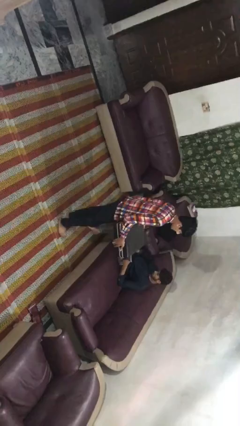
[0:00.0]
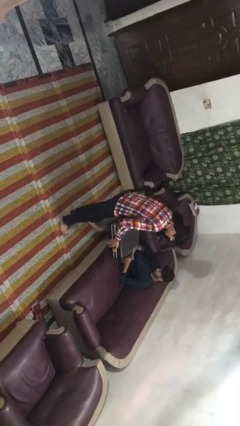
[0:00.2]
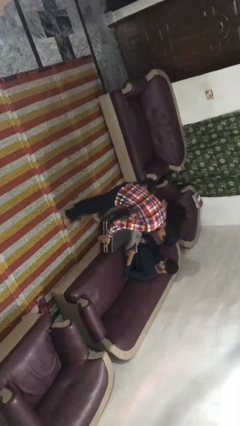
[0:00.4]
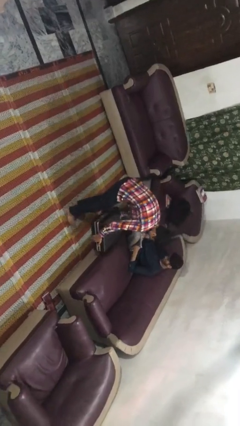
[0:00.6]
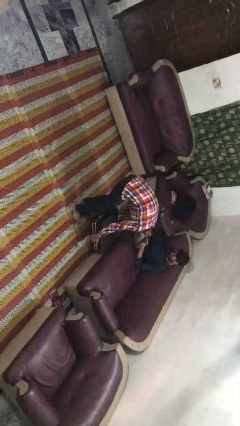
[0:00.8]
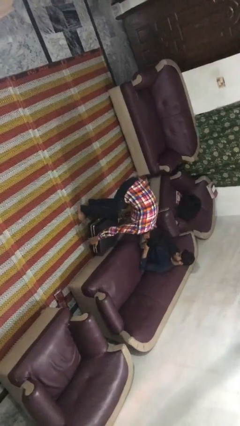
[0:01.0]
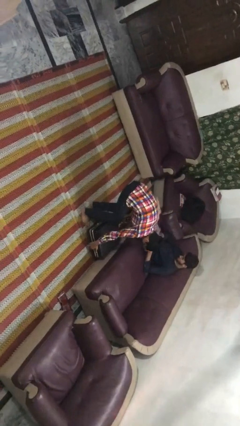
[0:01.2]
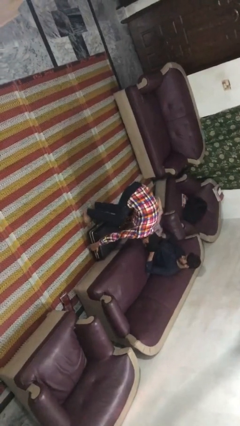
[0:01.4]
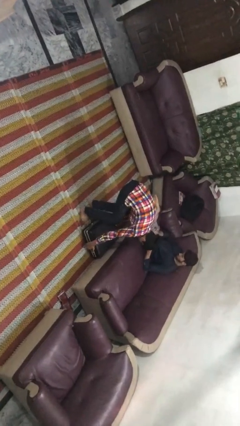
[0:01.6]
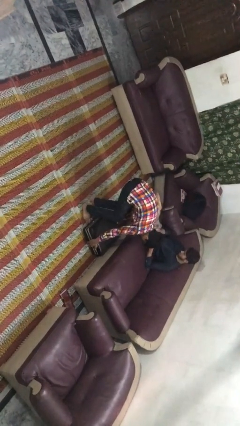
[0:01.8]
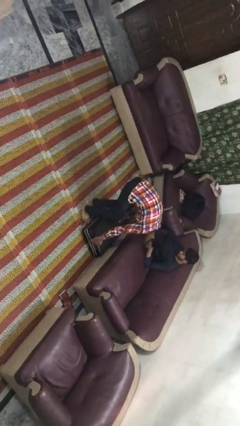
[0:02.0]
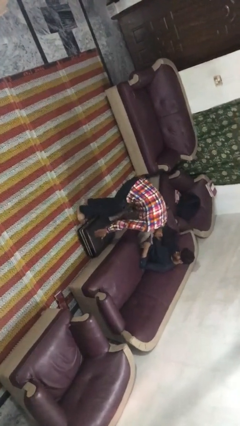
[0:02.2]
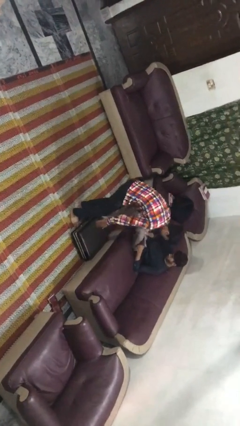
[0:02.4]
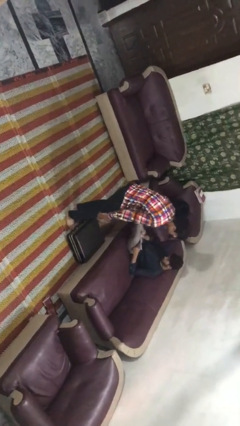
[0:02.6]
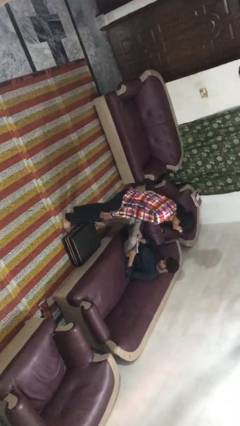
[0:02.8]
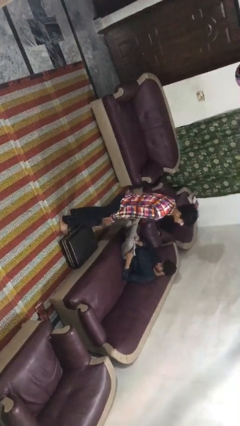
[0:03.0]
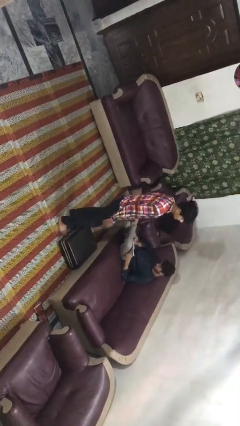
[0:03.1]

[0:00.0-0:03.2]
person puts down object on floor

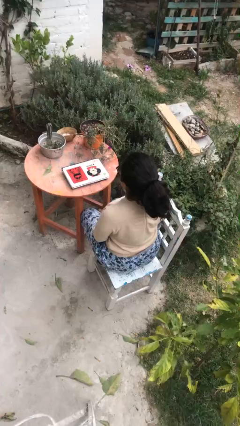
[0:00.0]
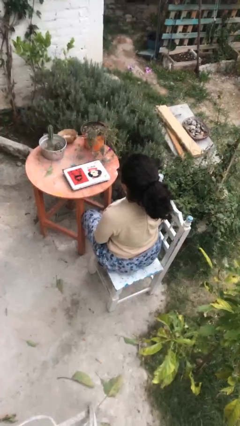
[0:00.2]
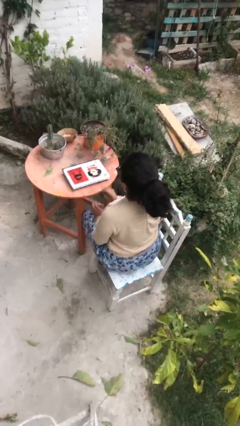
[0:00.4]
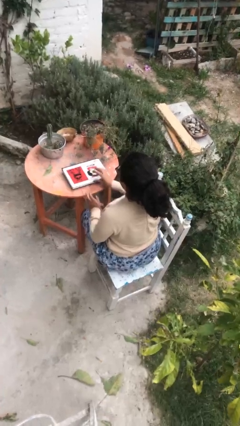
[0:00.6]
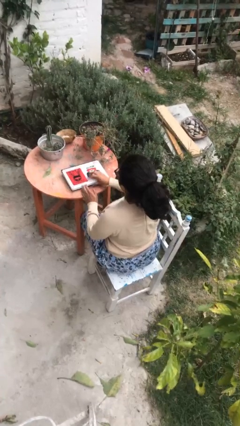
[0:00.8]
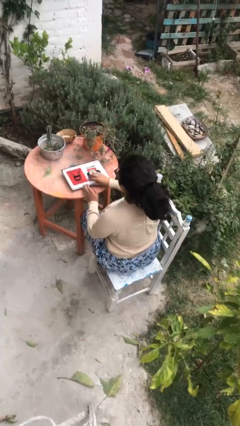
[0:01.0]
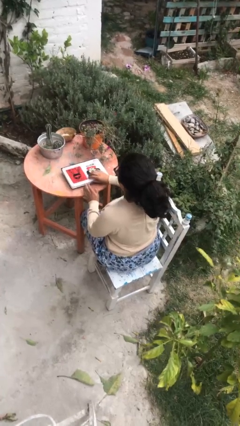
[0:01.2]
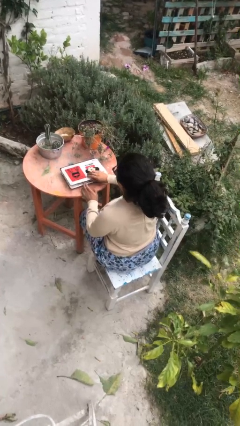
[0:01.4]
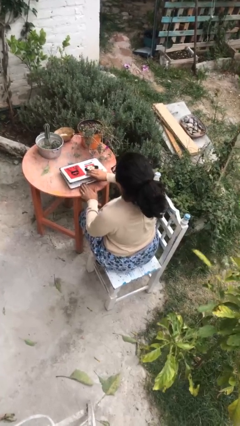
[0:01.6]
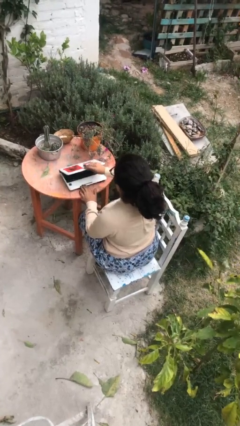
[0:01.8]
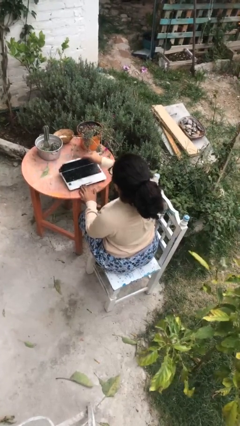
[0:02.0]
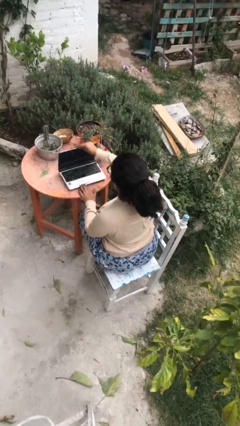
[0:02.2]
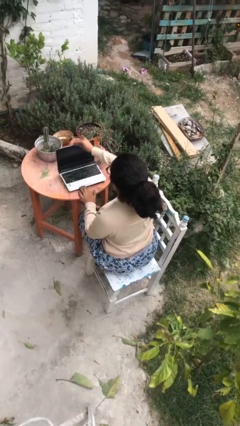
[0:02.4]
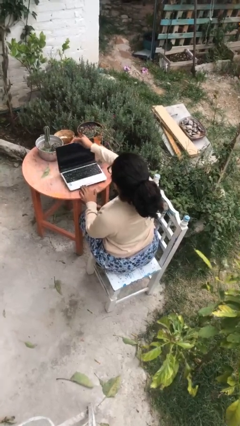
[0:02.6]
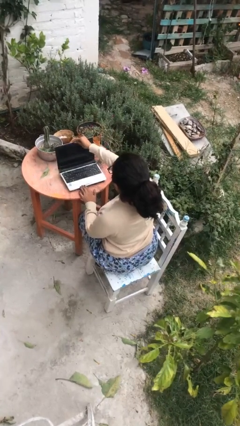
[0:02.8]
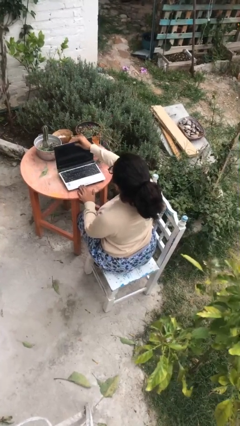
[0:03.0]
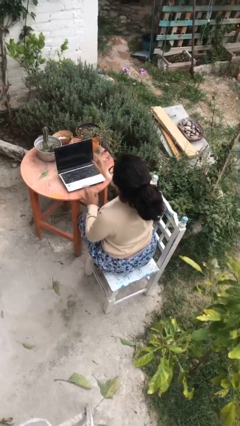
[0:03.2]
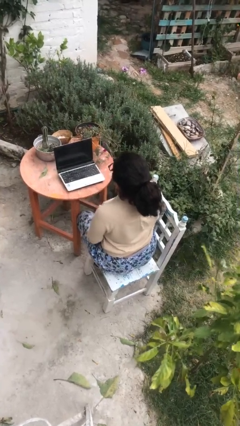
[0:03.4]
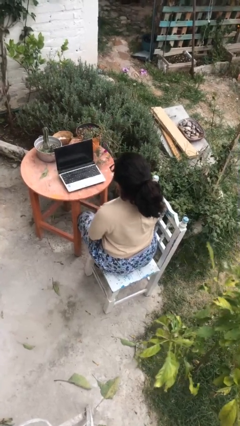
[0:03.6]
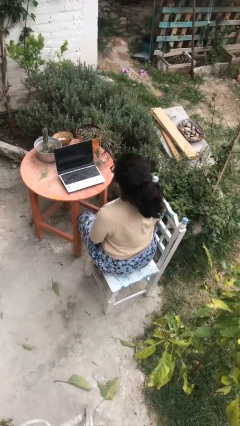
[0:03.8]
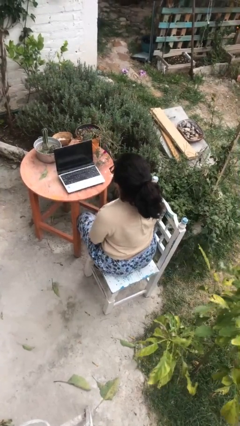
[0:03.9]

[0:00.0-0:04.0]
person opens laptop

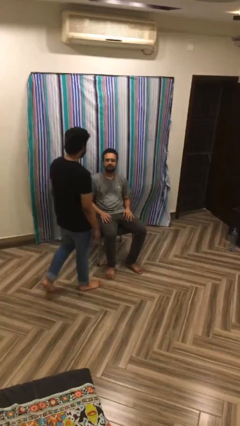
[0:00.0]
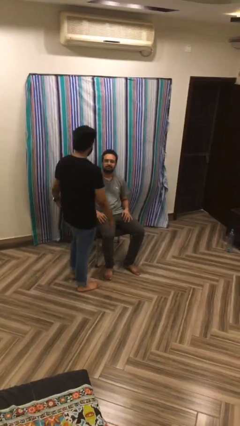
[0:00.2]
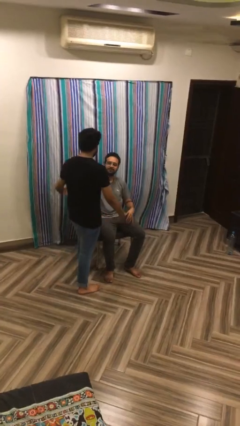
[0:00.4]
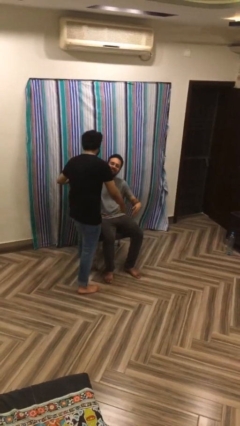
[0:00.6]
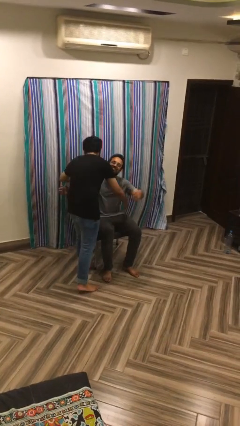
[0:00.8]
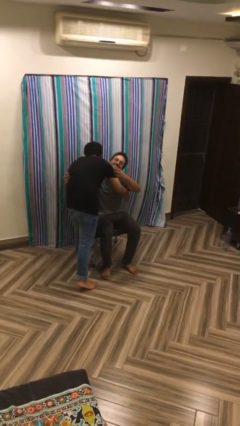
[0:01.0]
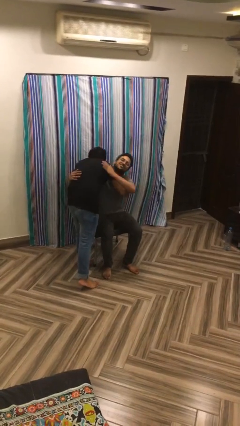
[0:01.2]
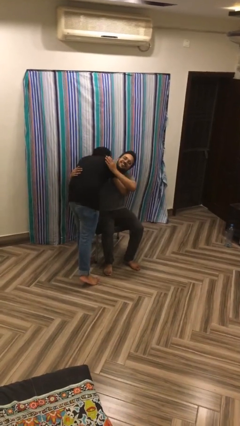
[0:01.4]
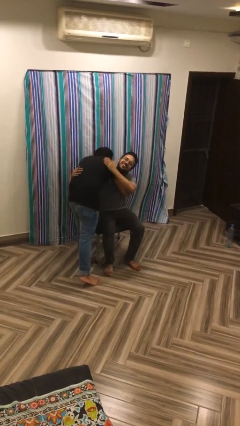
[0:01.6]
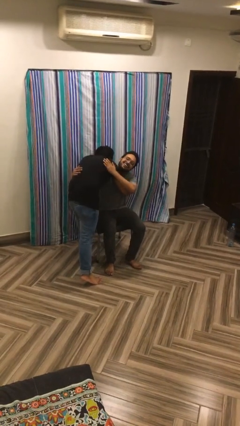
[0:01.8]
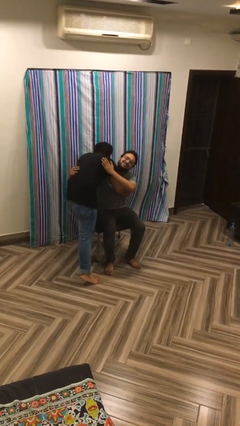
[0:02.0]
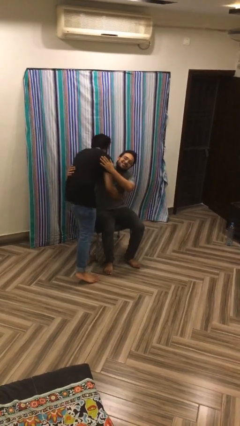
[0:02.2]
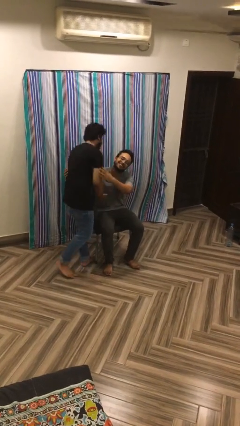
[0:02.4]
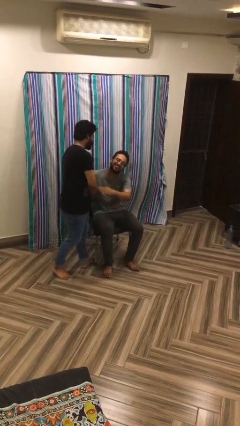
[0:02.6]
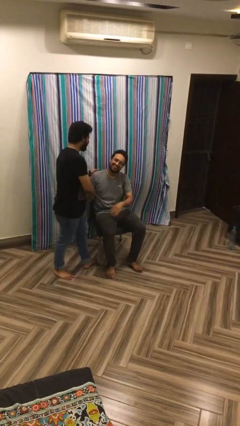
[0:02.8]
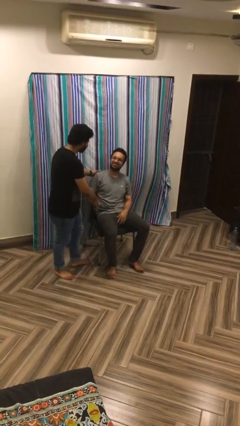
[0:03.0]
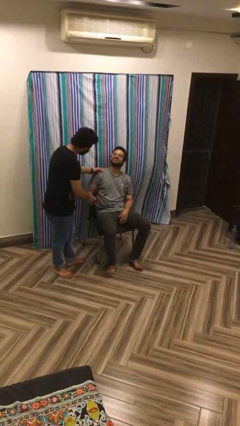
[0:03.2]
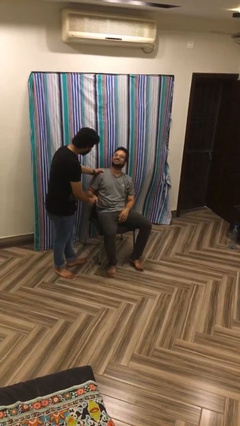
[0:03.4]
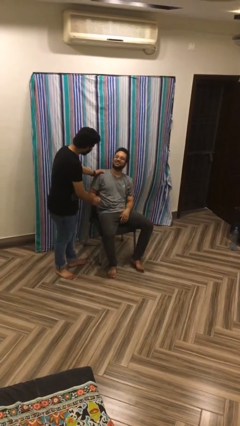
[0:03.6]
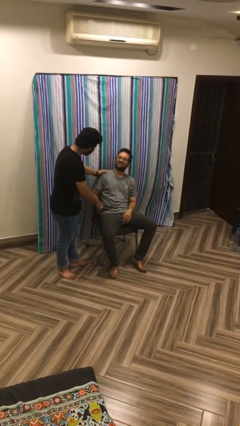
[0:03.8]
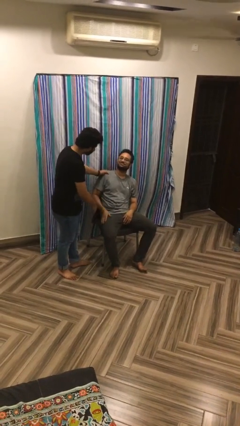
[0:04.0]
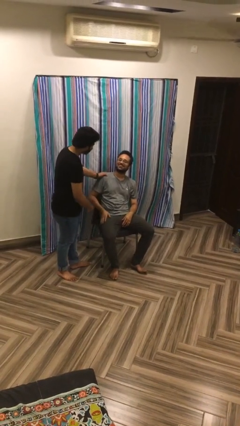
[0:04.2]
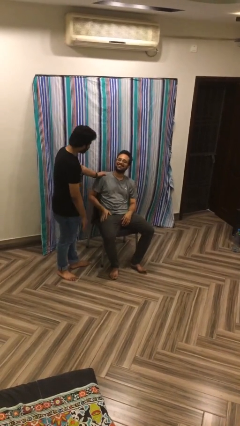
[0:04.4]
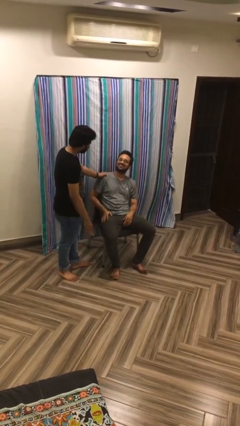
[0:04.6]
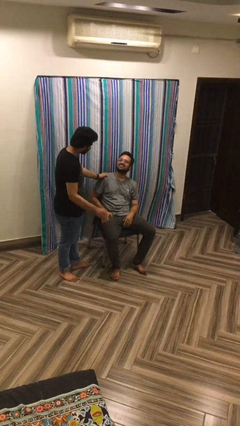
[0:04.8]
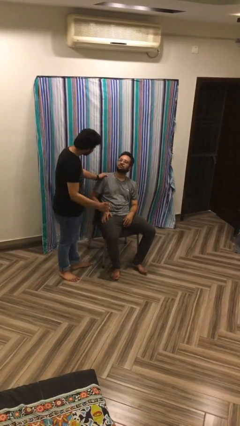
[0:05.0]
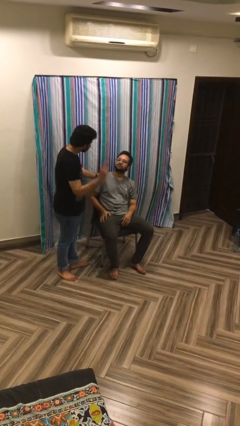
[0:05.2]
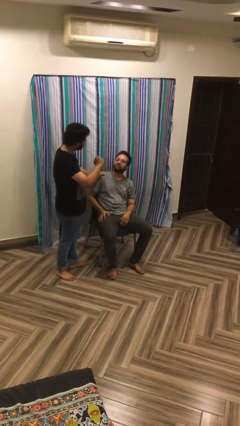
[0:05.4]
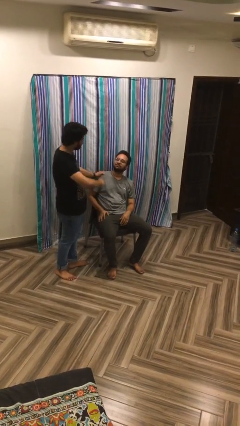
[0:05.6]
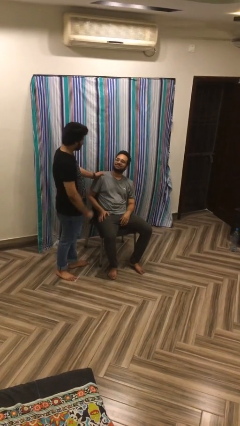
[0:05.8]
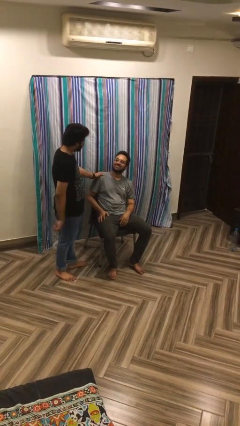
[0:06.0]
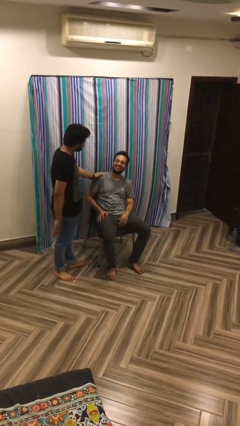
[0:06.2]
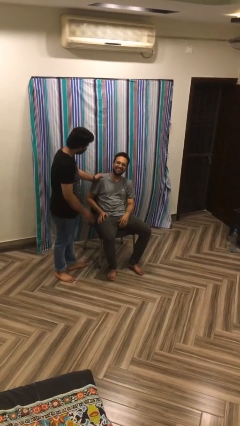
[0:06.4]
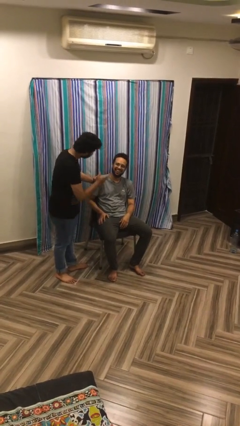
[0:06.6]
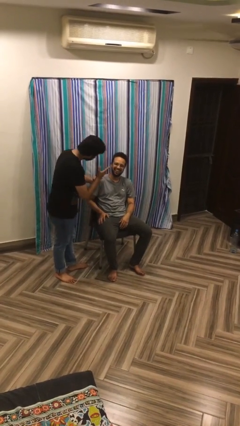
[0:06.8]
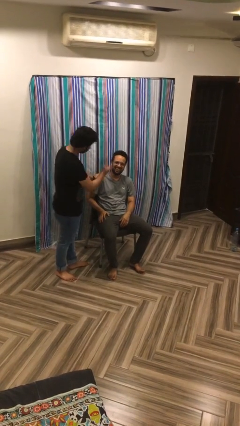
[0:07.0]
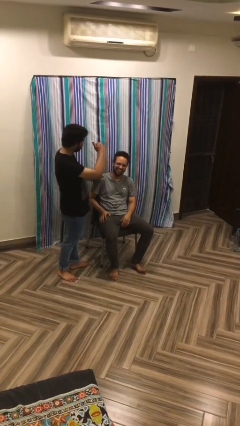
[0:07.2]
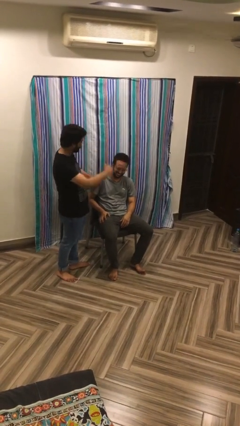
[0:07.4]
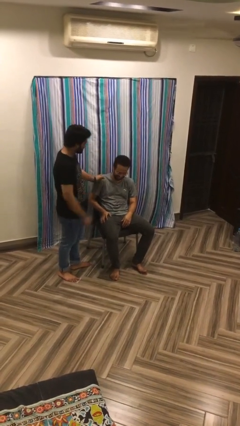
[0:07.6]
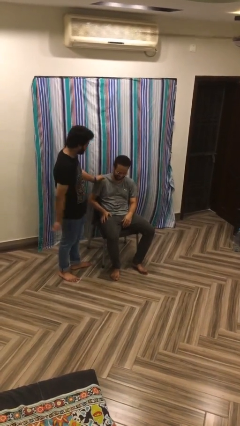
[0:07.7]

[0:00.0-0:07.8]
person embraces person

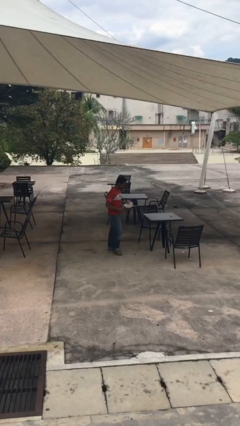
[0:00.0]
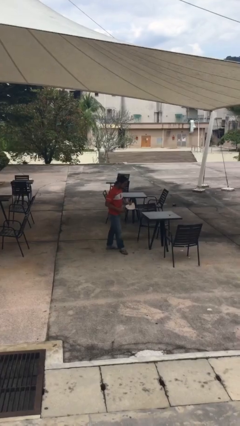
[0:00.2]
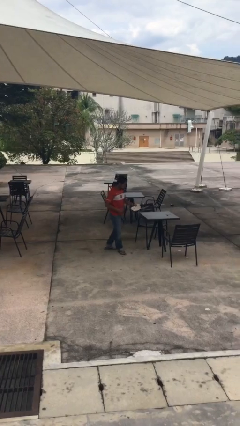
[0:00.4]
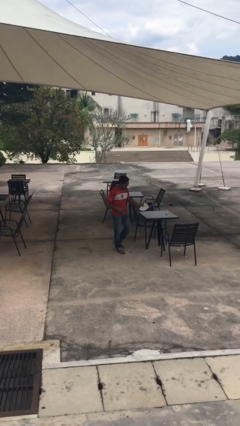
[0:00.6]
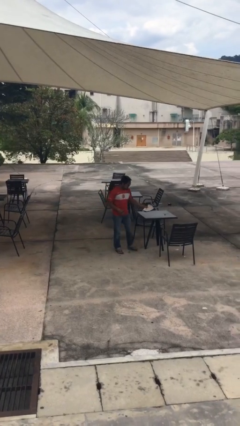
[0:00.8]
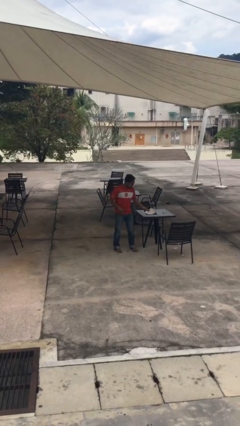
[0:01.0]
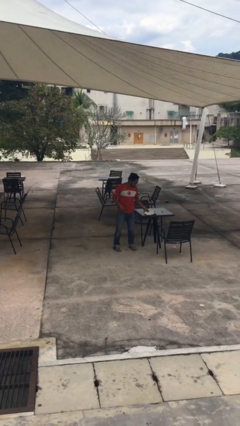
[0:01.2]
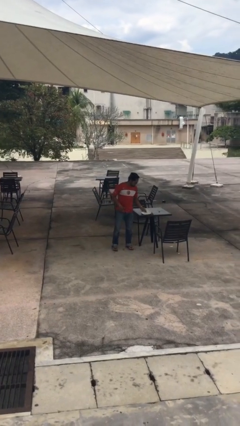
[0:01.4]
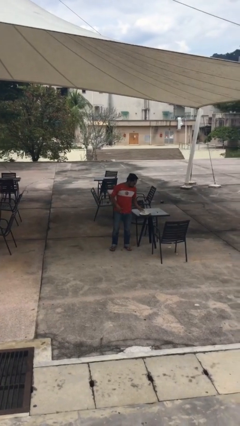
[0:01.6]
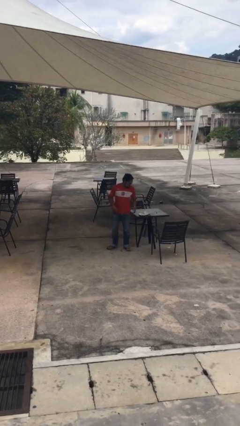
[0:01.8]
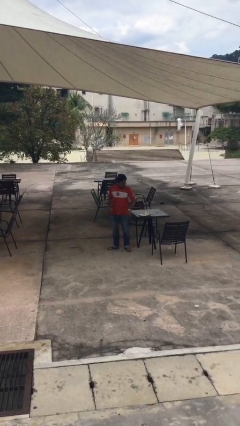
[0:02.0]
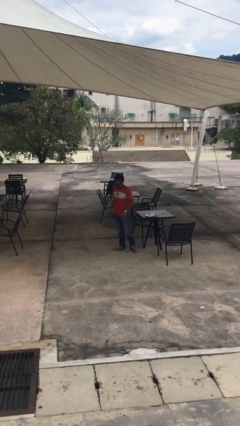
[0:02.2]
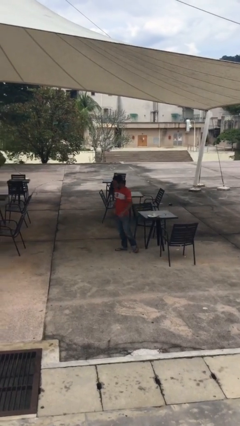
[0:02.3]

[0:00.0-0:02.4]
person puts down object on table

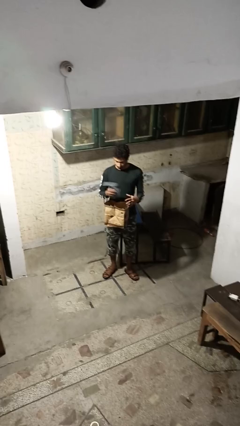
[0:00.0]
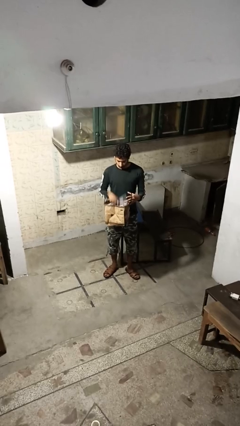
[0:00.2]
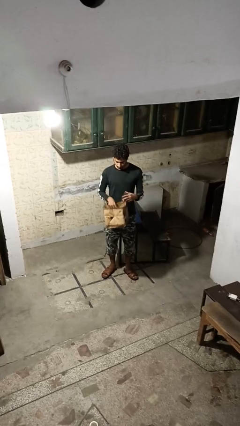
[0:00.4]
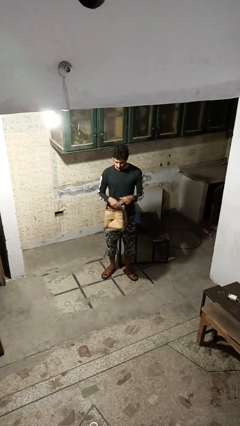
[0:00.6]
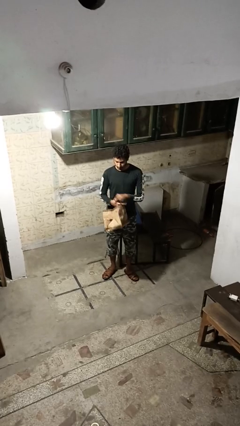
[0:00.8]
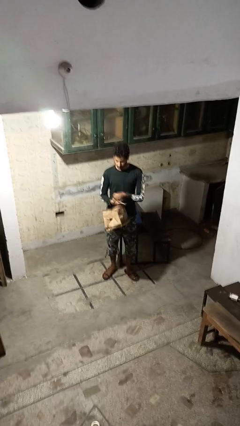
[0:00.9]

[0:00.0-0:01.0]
person puts object into purse
